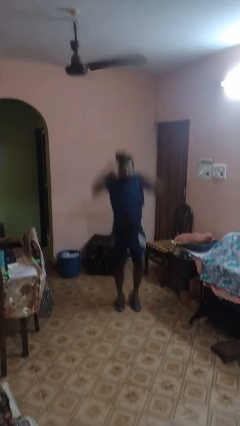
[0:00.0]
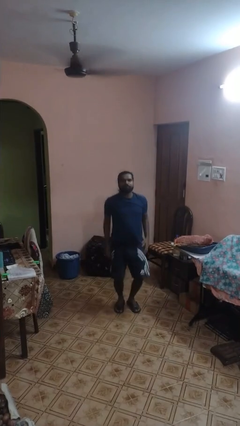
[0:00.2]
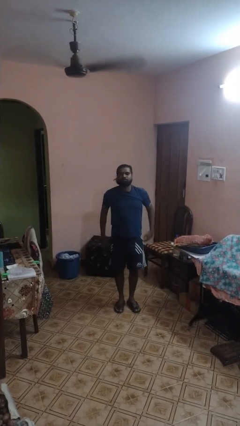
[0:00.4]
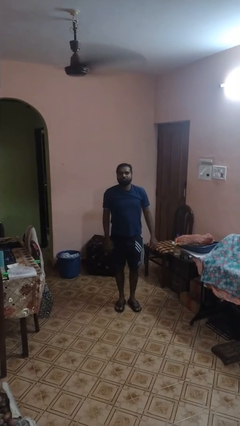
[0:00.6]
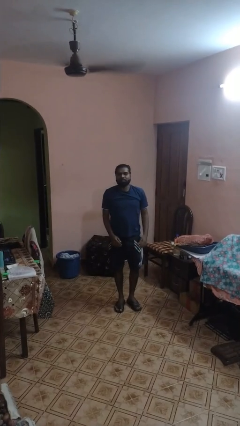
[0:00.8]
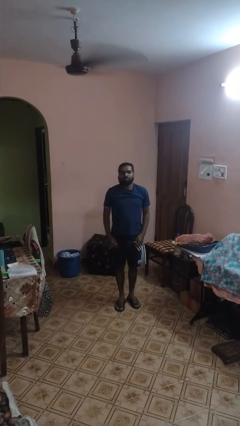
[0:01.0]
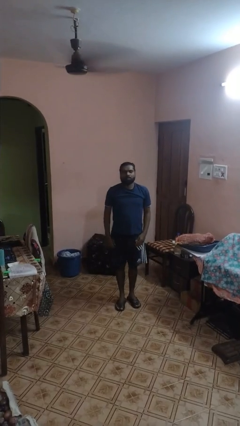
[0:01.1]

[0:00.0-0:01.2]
person jumps

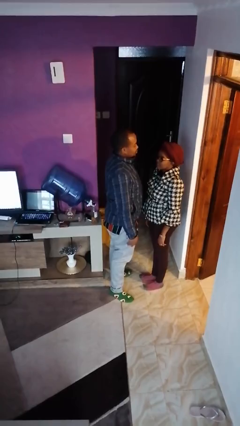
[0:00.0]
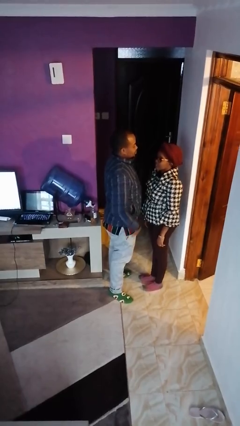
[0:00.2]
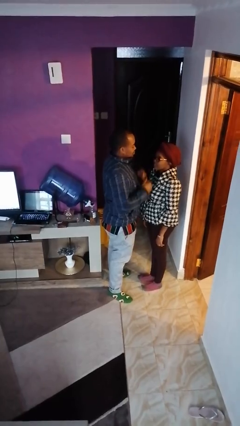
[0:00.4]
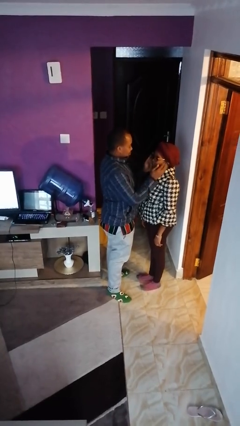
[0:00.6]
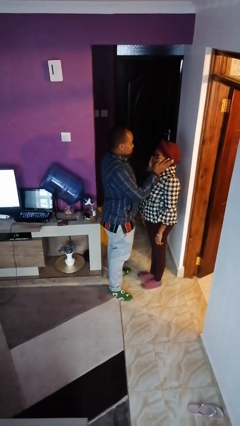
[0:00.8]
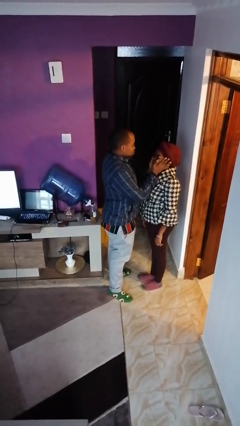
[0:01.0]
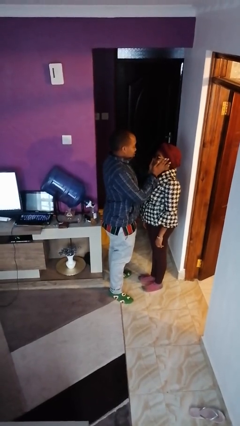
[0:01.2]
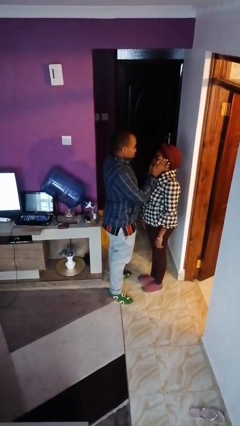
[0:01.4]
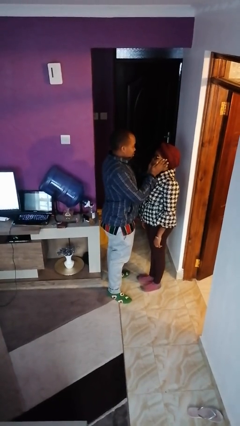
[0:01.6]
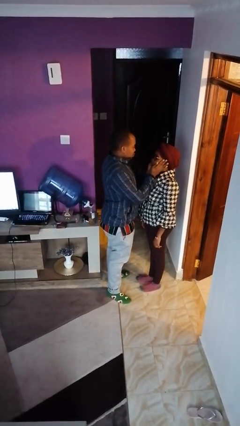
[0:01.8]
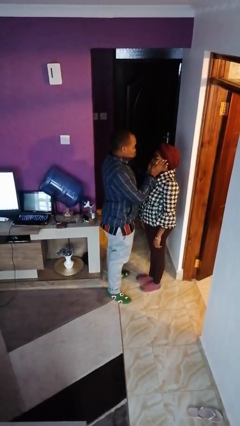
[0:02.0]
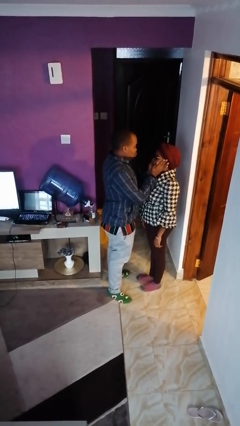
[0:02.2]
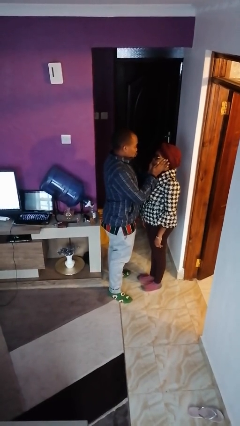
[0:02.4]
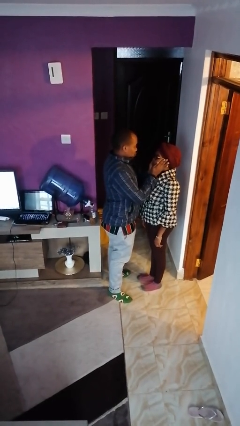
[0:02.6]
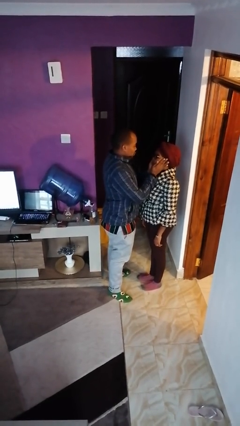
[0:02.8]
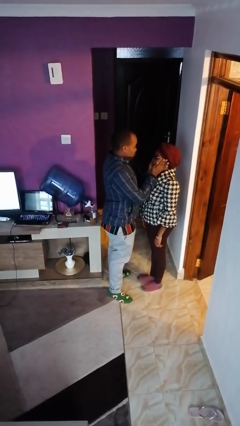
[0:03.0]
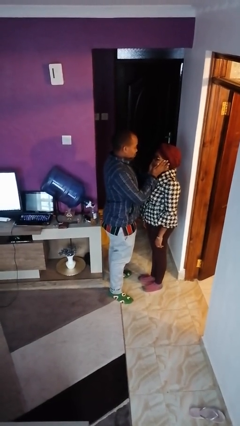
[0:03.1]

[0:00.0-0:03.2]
person touches face of person

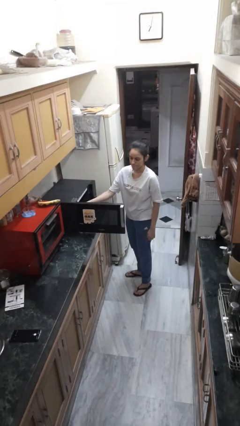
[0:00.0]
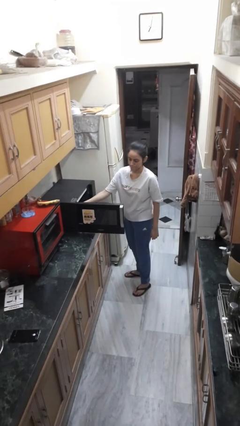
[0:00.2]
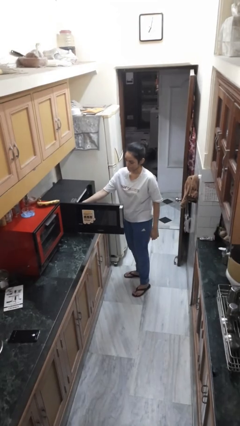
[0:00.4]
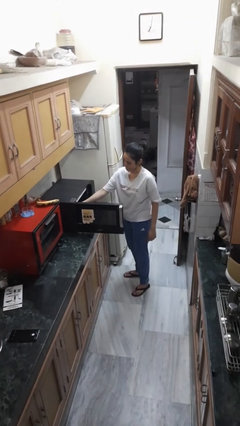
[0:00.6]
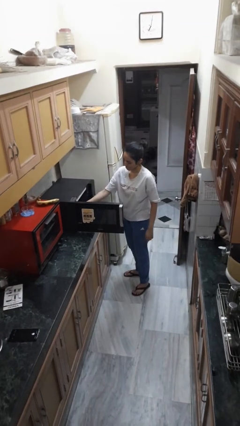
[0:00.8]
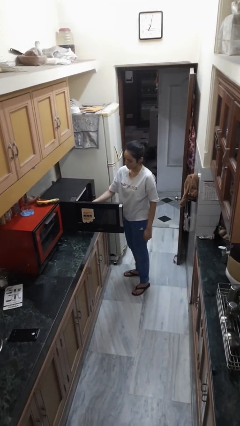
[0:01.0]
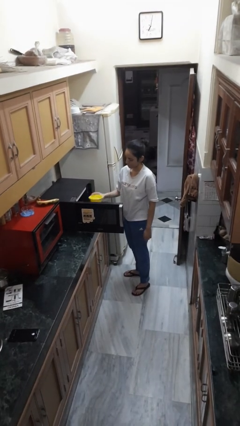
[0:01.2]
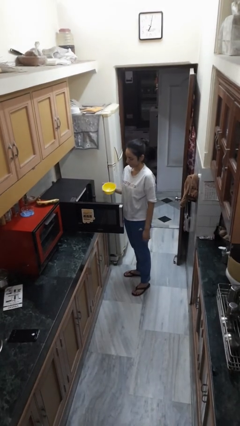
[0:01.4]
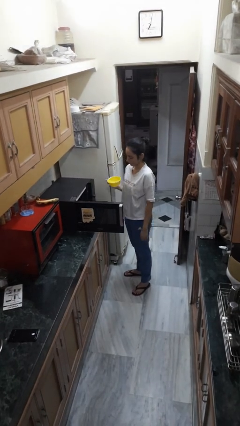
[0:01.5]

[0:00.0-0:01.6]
person takes object from microwave

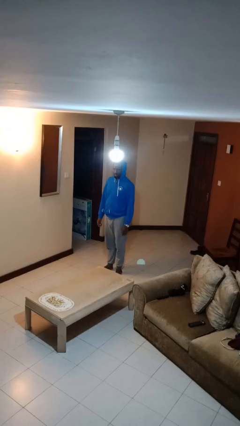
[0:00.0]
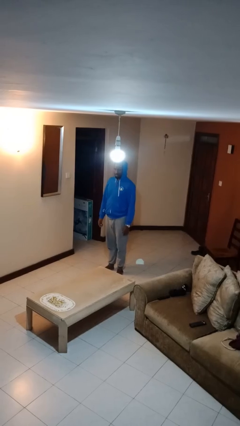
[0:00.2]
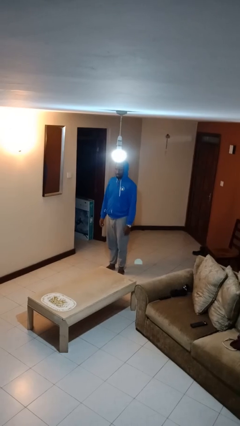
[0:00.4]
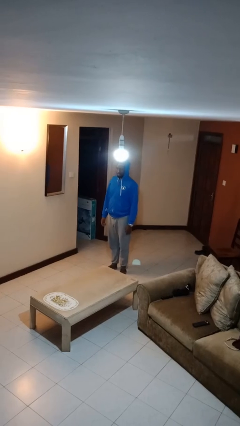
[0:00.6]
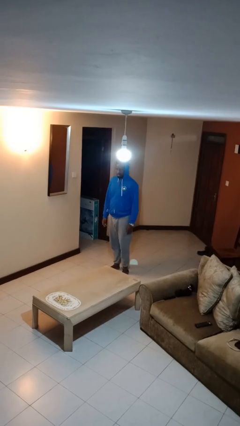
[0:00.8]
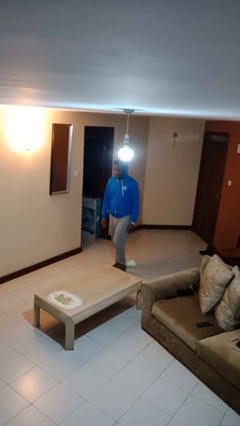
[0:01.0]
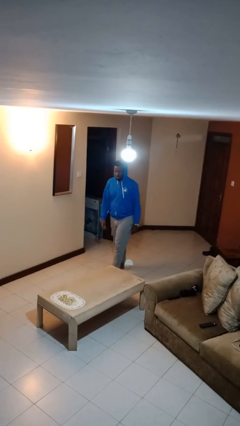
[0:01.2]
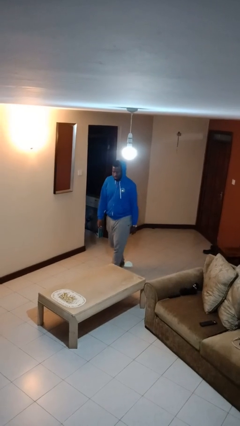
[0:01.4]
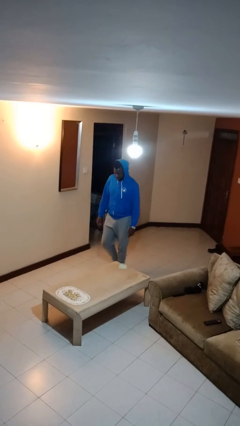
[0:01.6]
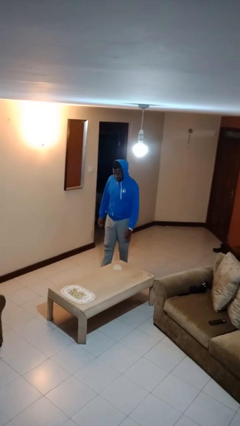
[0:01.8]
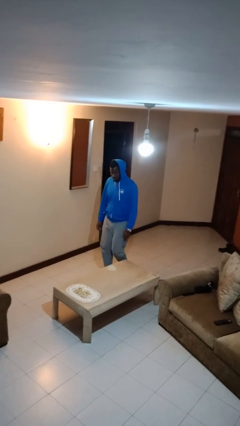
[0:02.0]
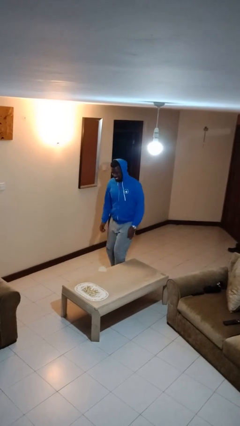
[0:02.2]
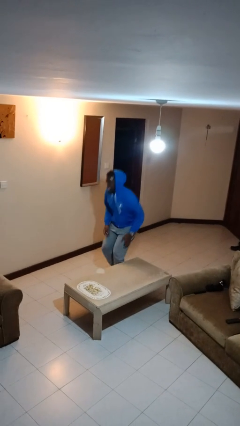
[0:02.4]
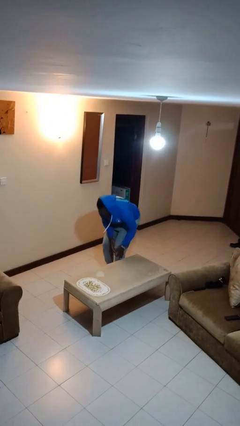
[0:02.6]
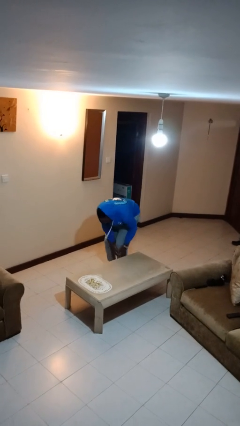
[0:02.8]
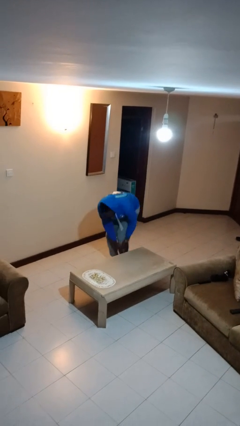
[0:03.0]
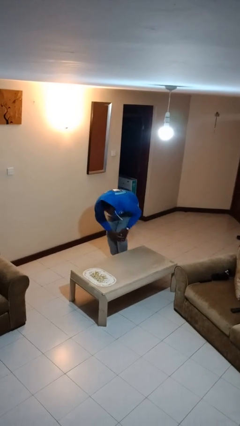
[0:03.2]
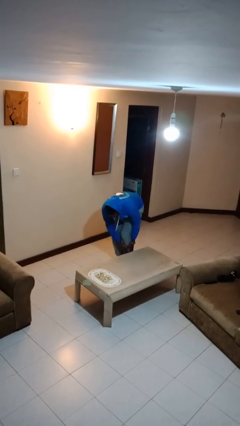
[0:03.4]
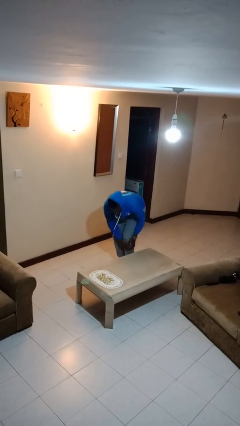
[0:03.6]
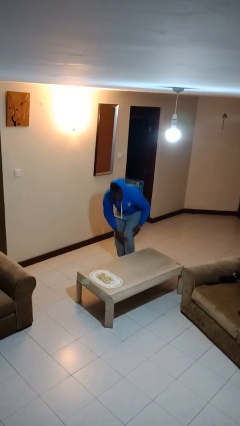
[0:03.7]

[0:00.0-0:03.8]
person bumps into table

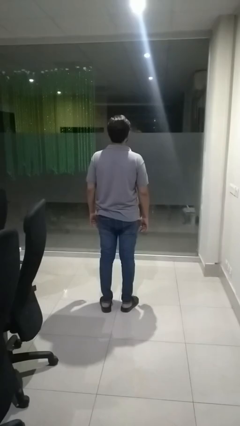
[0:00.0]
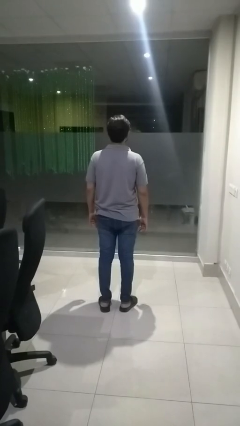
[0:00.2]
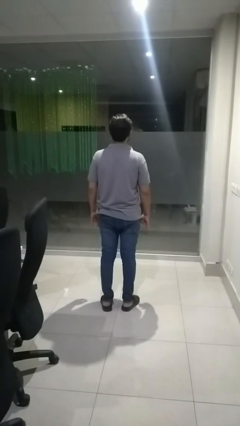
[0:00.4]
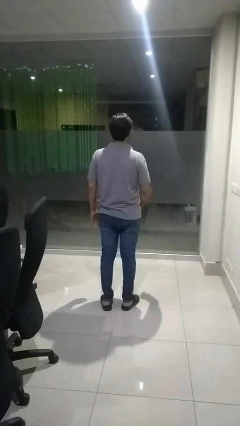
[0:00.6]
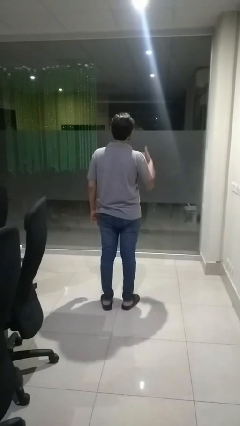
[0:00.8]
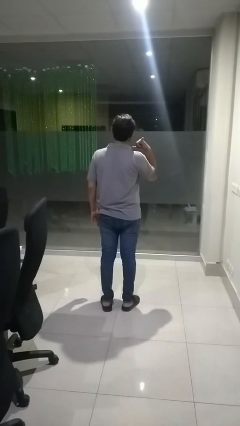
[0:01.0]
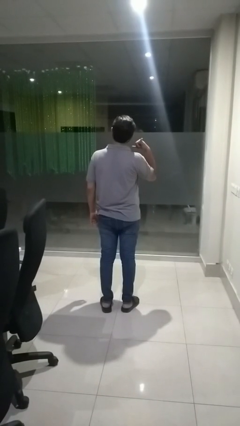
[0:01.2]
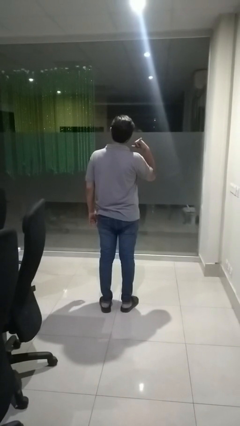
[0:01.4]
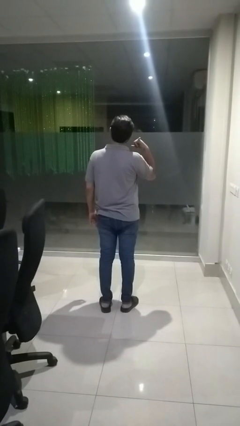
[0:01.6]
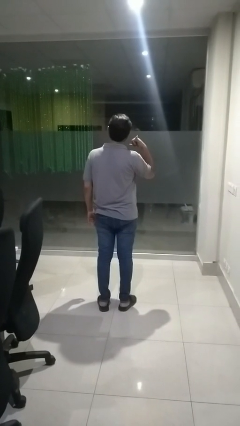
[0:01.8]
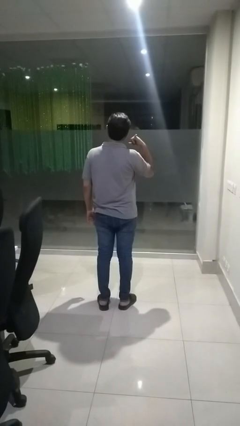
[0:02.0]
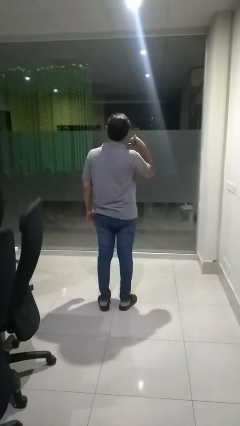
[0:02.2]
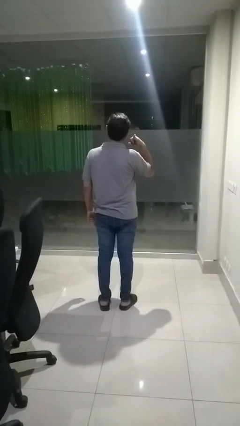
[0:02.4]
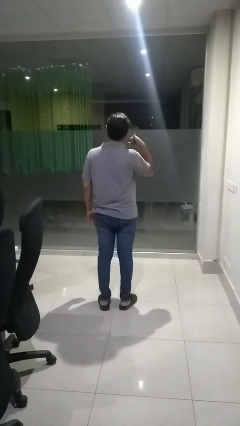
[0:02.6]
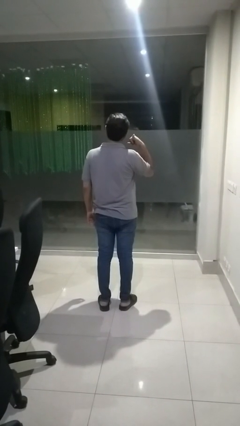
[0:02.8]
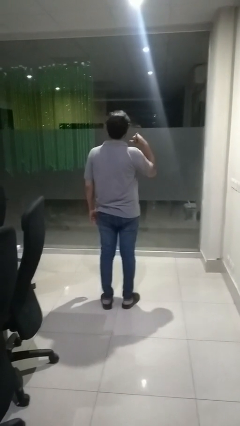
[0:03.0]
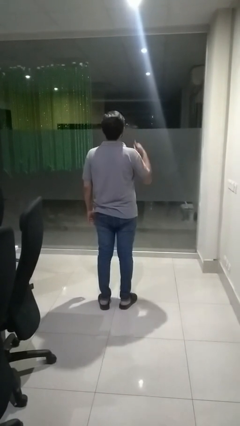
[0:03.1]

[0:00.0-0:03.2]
person gestures call me

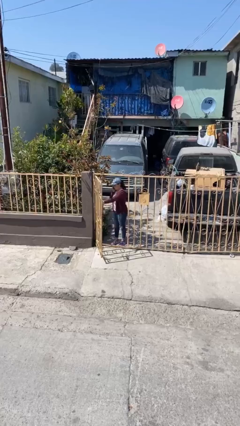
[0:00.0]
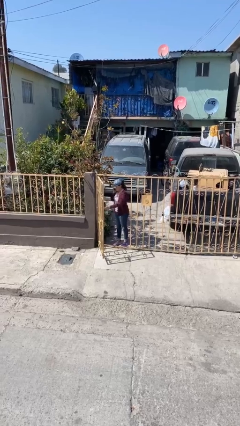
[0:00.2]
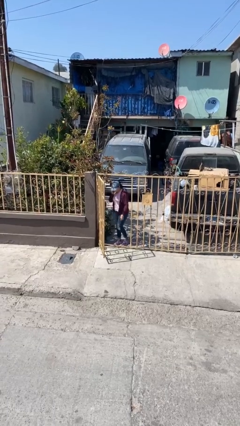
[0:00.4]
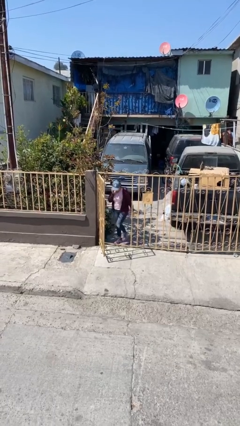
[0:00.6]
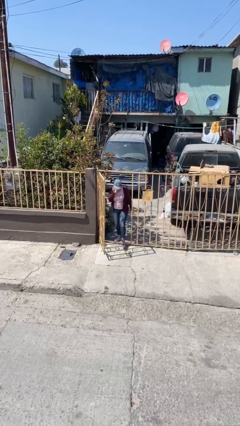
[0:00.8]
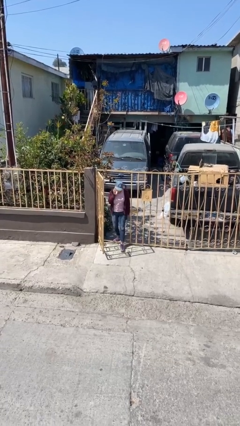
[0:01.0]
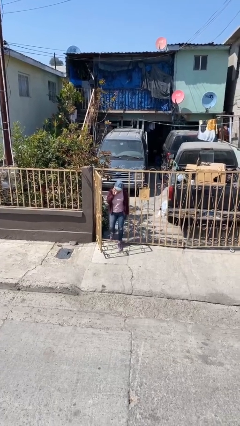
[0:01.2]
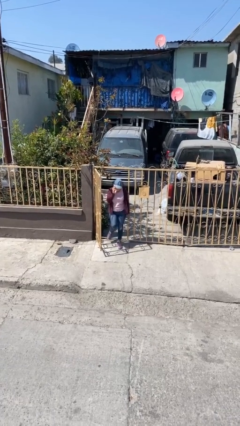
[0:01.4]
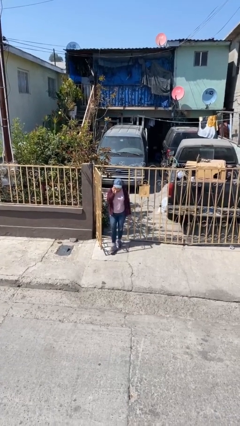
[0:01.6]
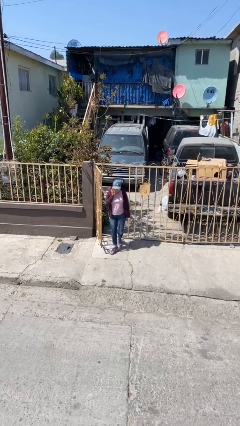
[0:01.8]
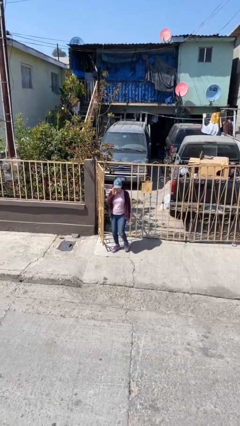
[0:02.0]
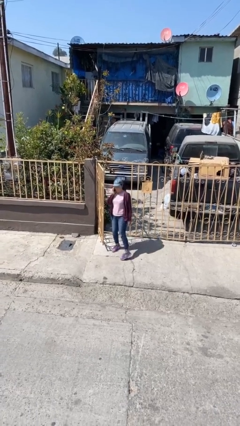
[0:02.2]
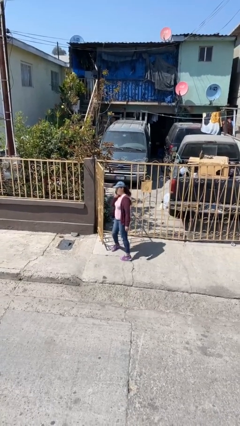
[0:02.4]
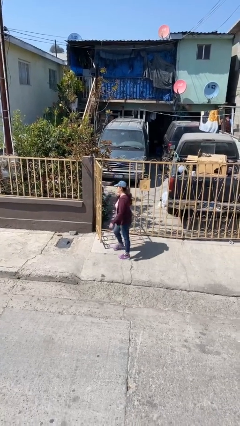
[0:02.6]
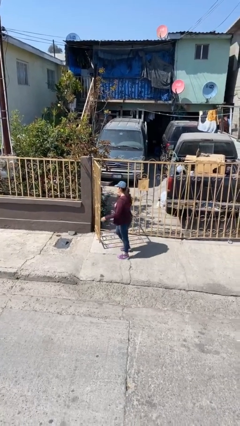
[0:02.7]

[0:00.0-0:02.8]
person enters scene through structure

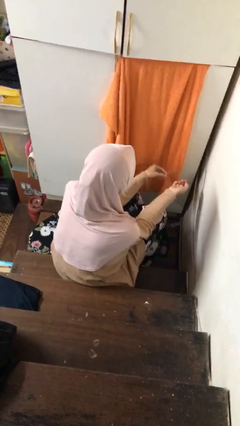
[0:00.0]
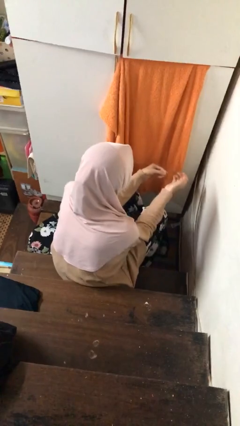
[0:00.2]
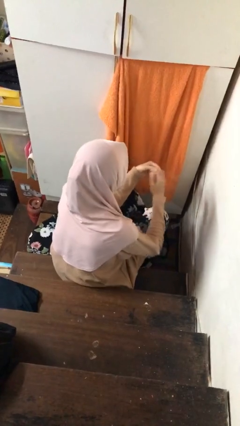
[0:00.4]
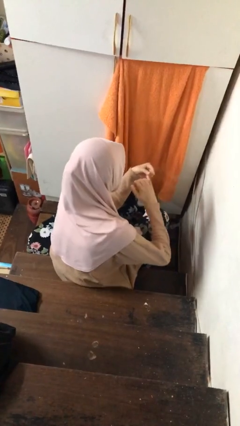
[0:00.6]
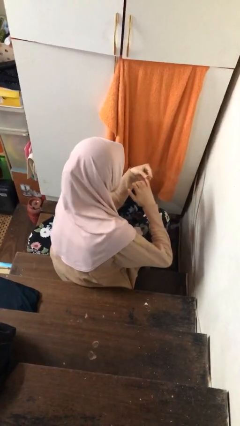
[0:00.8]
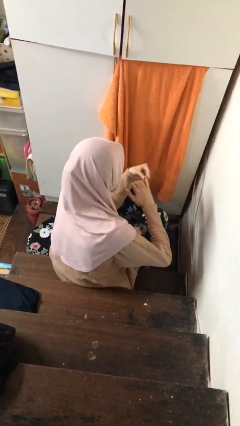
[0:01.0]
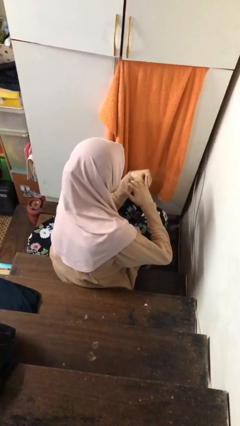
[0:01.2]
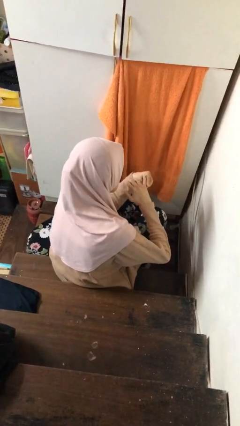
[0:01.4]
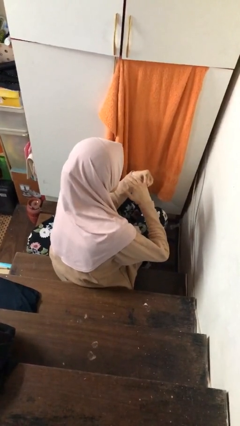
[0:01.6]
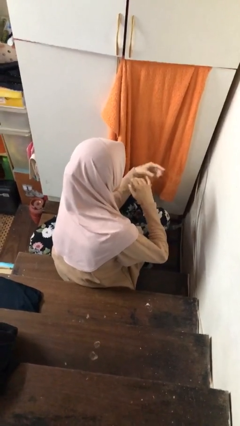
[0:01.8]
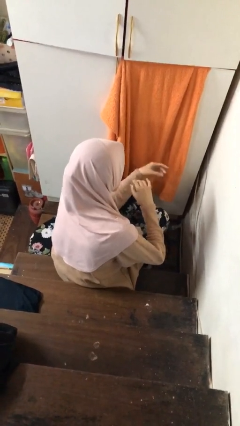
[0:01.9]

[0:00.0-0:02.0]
person puts on ring
